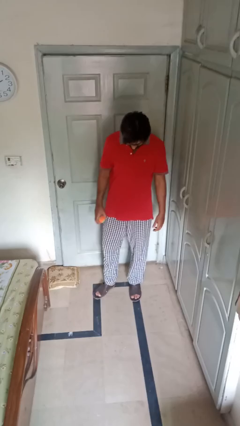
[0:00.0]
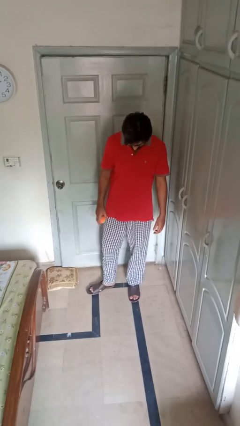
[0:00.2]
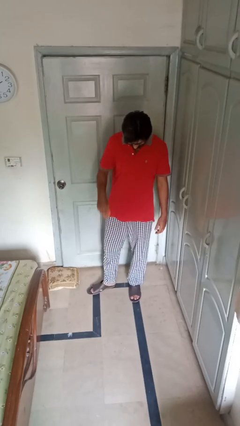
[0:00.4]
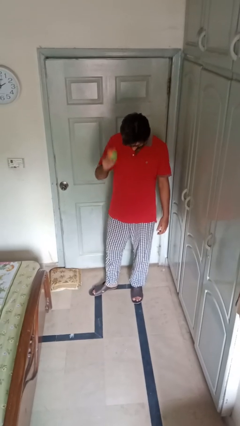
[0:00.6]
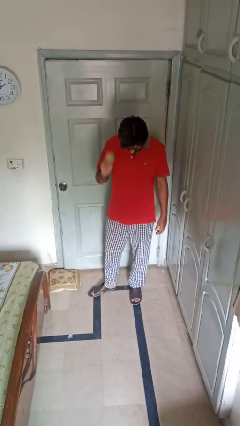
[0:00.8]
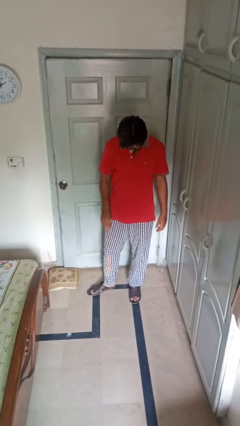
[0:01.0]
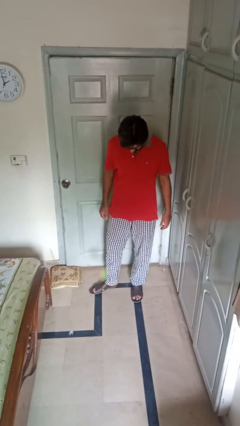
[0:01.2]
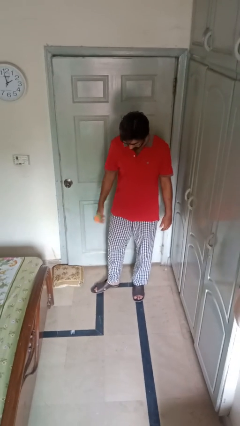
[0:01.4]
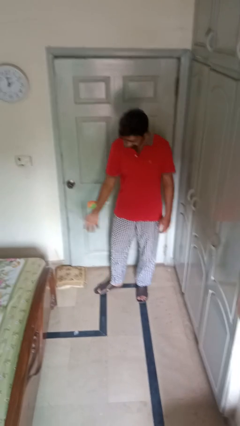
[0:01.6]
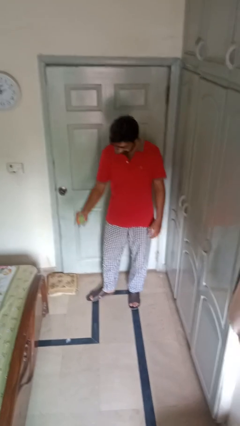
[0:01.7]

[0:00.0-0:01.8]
person bounces ball on floor

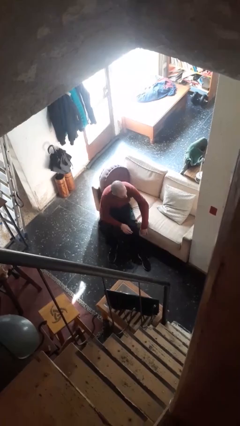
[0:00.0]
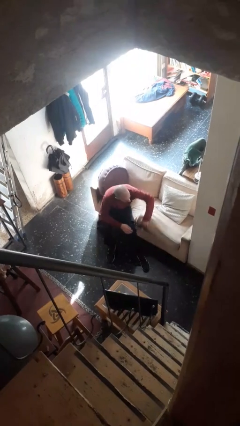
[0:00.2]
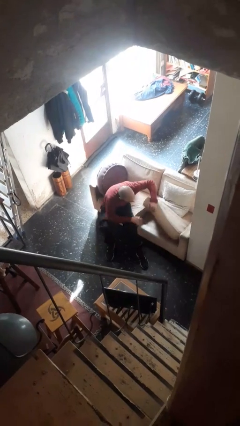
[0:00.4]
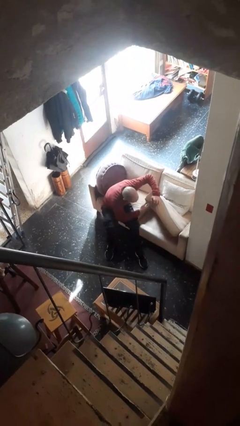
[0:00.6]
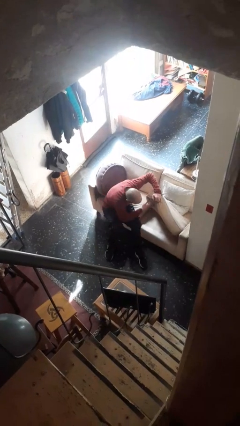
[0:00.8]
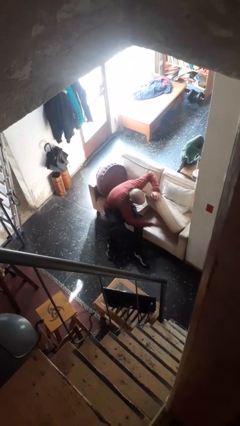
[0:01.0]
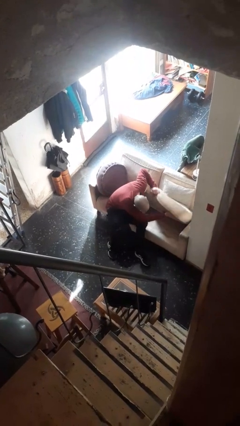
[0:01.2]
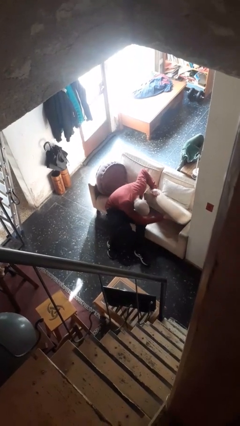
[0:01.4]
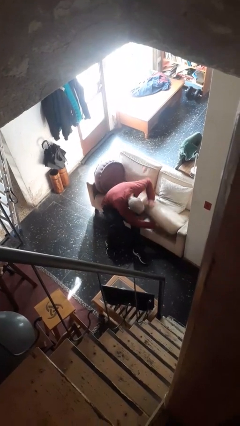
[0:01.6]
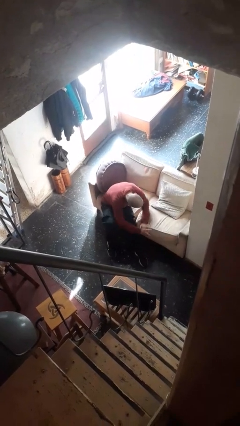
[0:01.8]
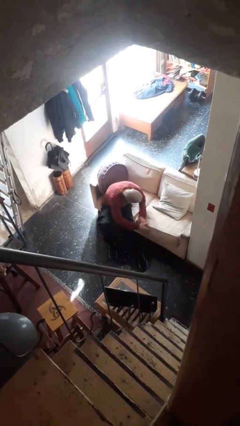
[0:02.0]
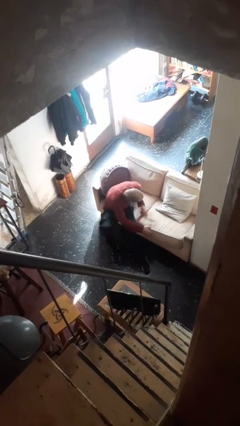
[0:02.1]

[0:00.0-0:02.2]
person searches in couch

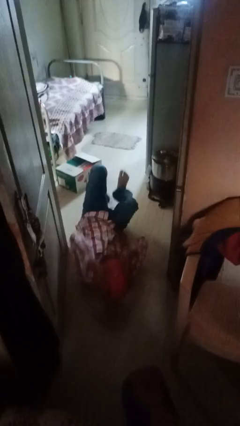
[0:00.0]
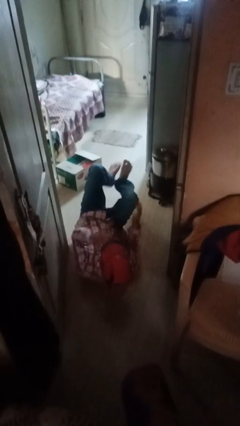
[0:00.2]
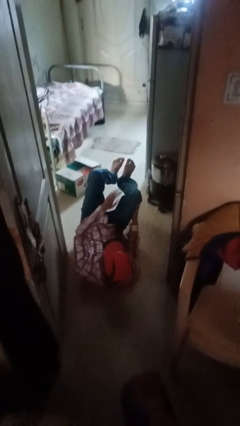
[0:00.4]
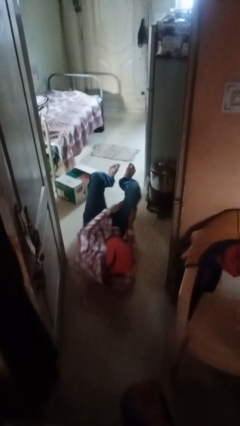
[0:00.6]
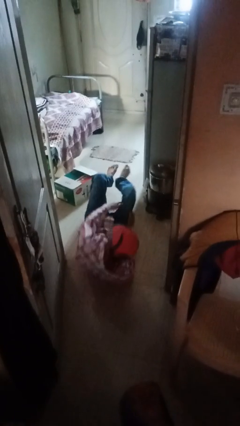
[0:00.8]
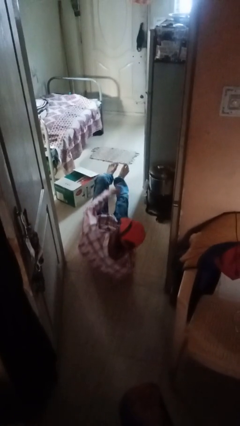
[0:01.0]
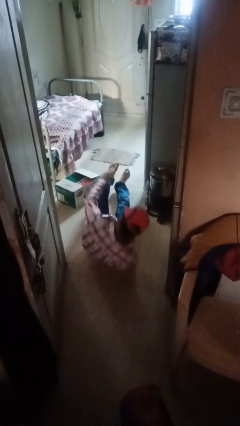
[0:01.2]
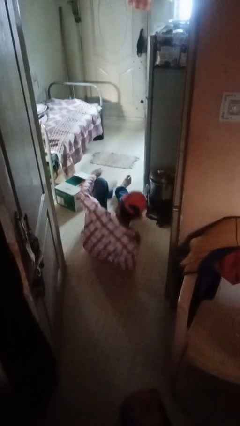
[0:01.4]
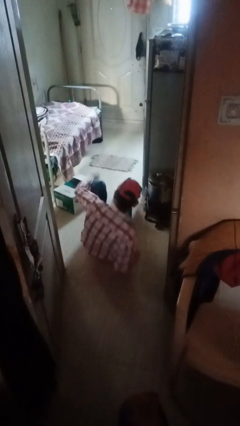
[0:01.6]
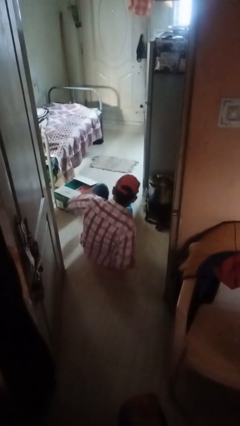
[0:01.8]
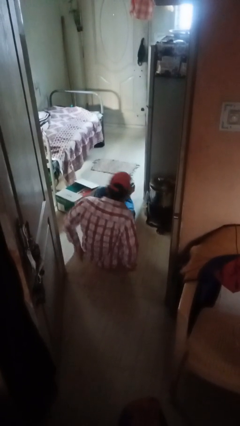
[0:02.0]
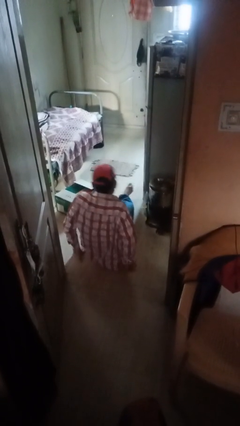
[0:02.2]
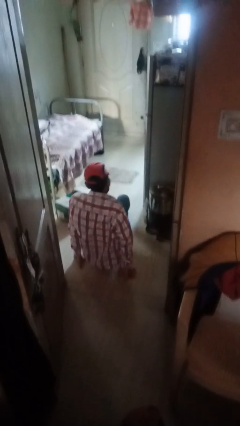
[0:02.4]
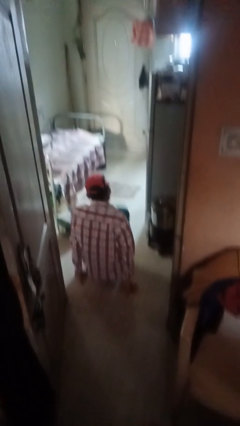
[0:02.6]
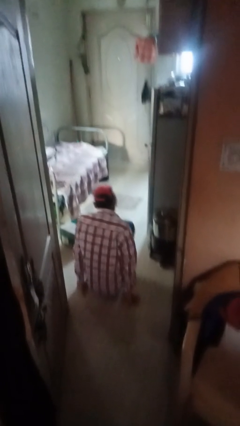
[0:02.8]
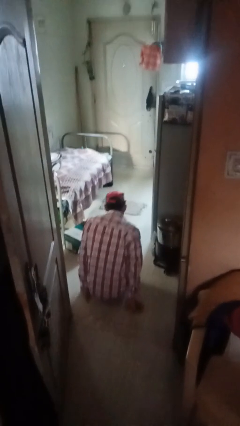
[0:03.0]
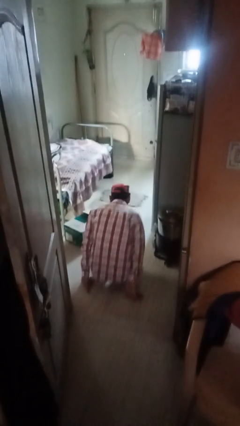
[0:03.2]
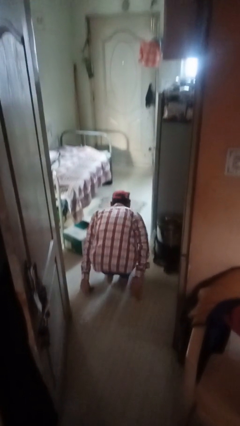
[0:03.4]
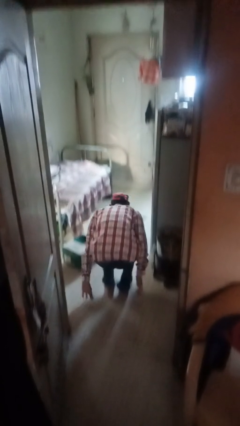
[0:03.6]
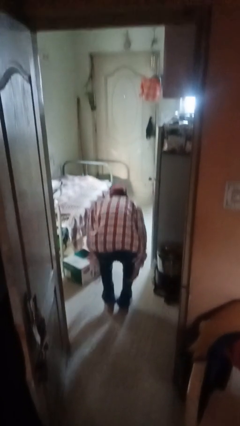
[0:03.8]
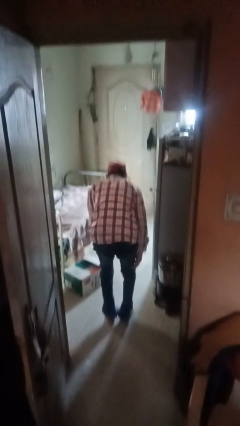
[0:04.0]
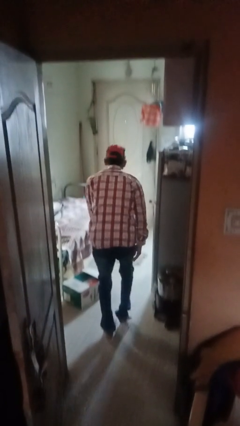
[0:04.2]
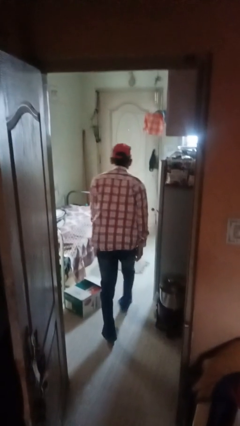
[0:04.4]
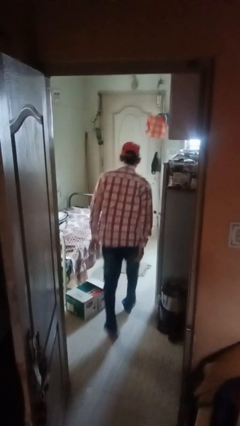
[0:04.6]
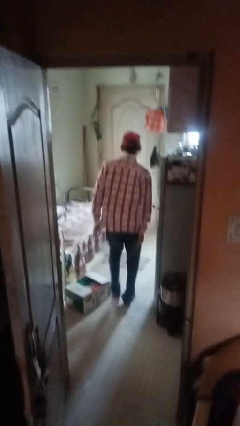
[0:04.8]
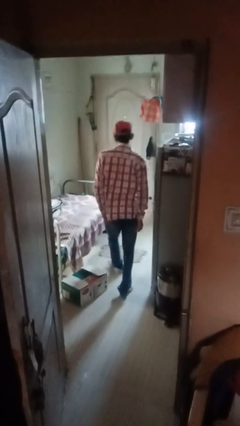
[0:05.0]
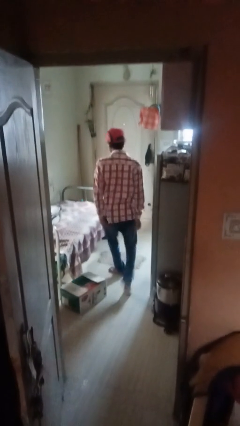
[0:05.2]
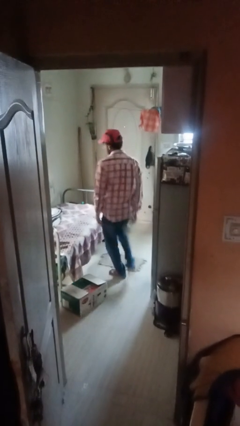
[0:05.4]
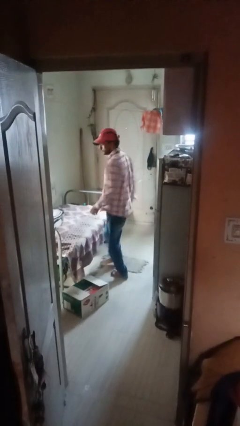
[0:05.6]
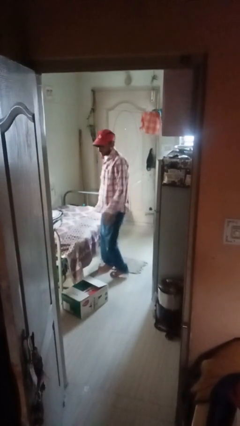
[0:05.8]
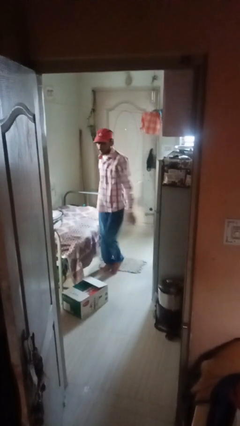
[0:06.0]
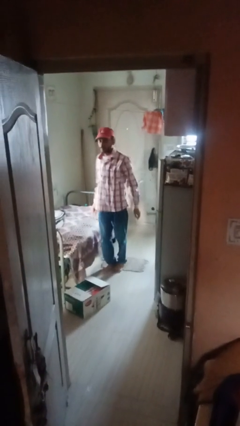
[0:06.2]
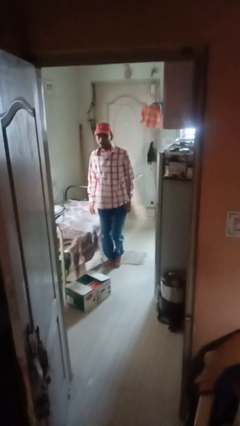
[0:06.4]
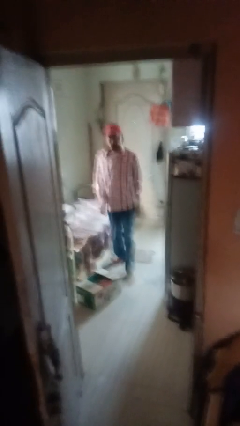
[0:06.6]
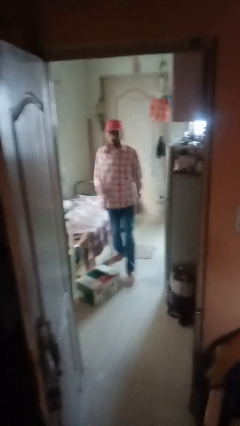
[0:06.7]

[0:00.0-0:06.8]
person stands up from floor

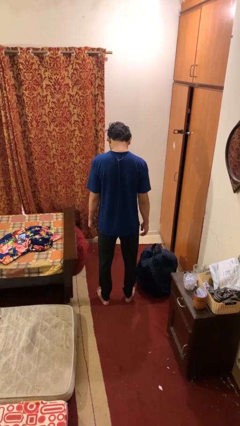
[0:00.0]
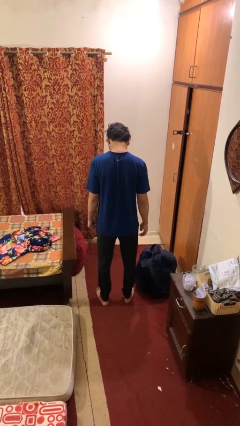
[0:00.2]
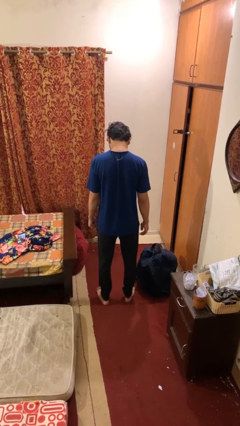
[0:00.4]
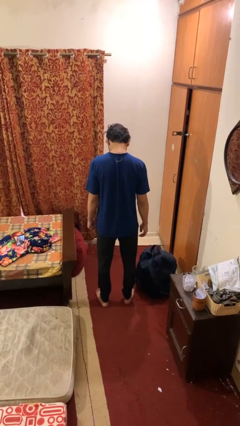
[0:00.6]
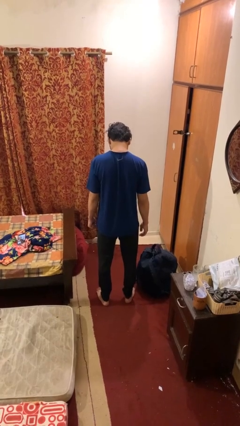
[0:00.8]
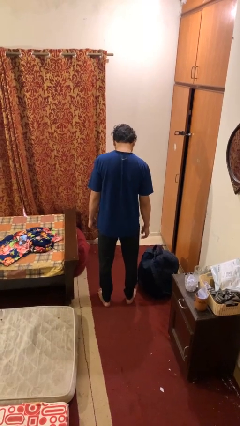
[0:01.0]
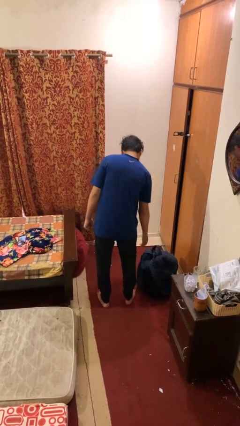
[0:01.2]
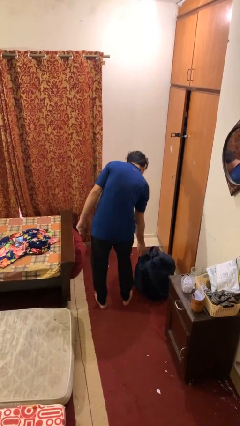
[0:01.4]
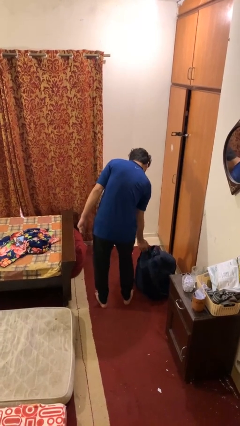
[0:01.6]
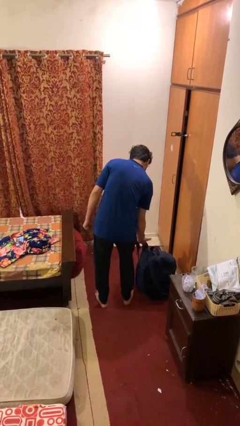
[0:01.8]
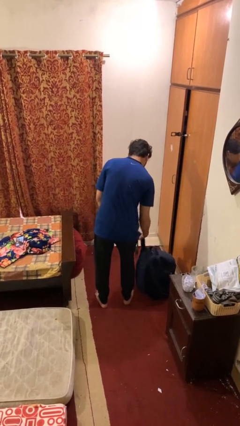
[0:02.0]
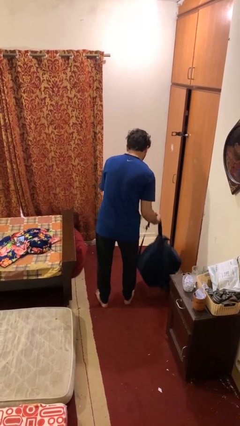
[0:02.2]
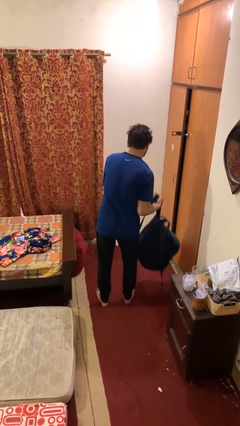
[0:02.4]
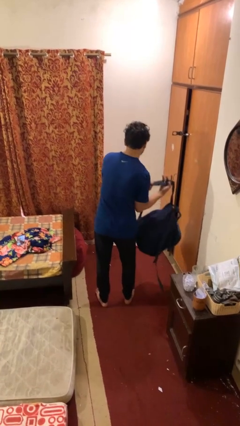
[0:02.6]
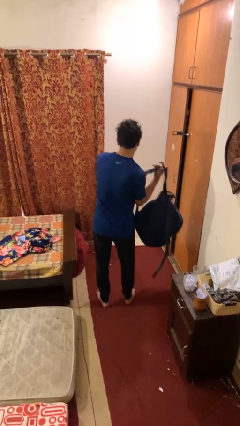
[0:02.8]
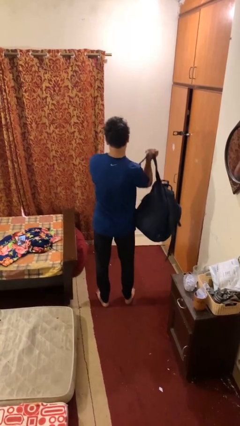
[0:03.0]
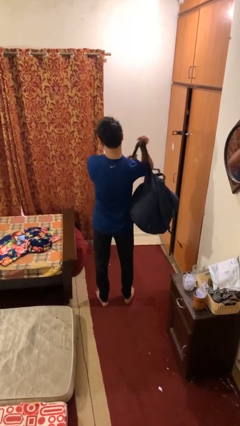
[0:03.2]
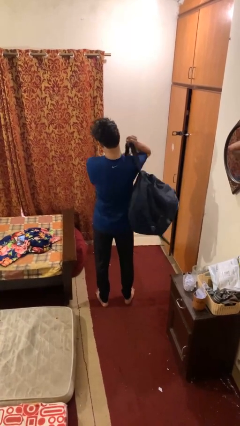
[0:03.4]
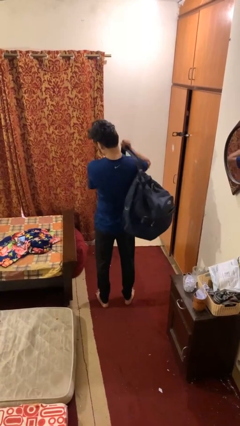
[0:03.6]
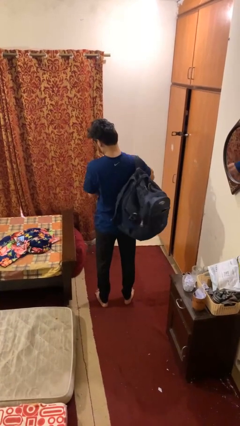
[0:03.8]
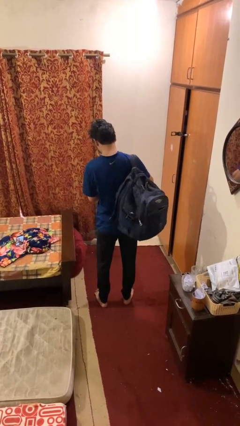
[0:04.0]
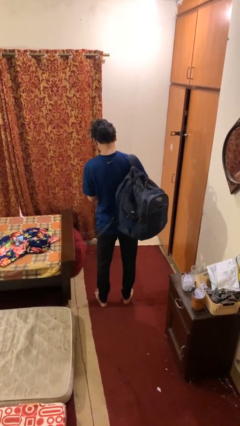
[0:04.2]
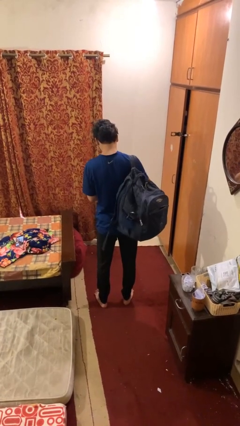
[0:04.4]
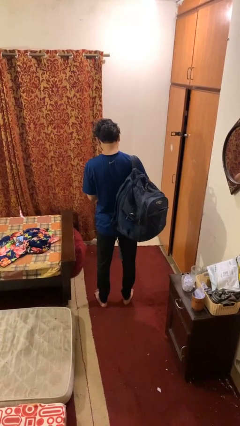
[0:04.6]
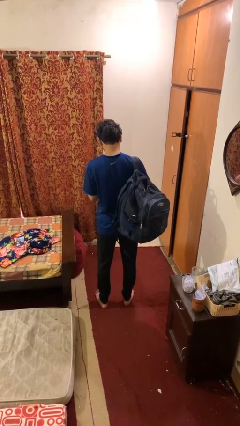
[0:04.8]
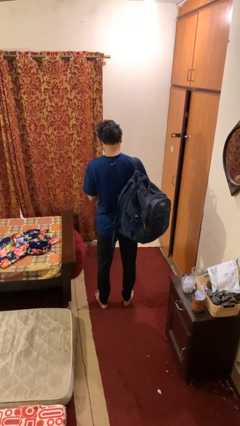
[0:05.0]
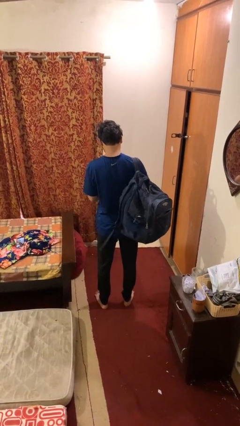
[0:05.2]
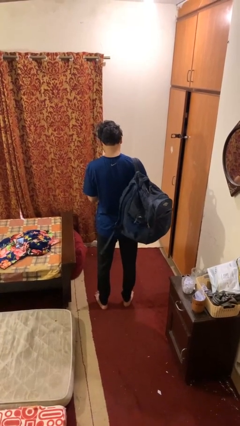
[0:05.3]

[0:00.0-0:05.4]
person puts on backpack

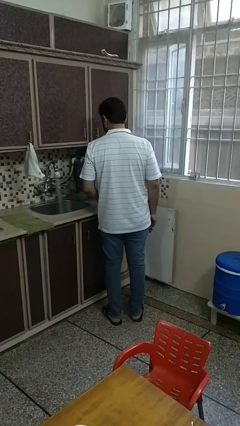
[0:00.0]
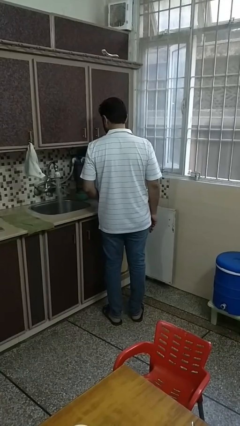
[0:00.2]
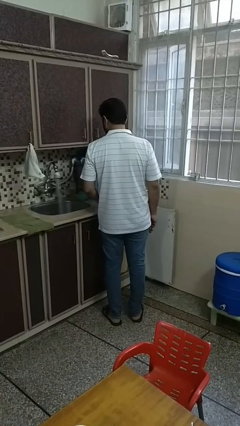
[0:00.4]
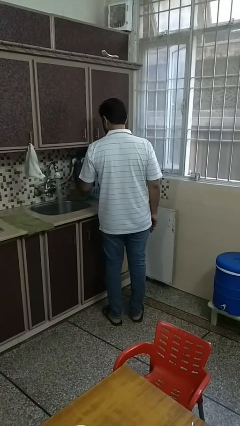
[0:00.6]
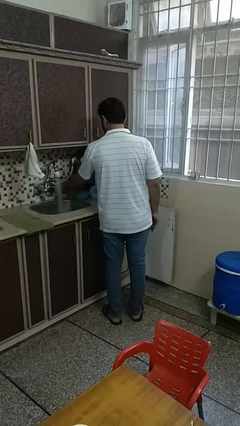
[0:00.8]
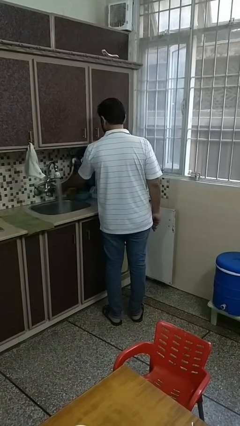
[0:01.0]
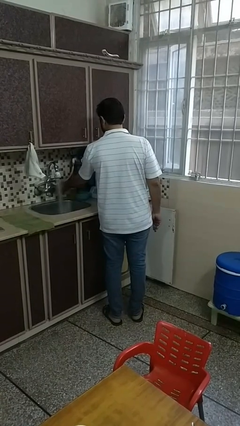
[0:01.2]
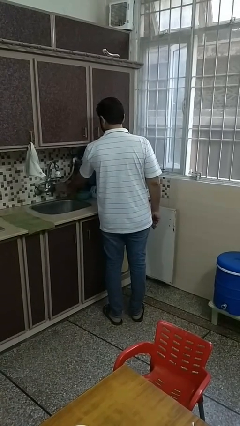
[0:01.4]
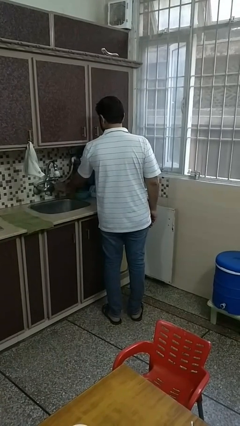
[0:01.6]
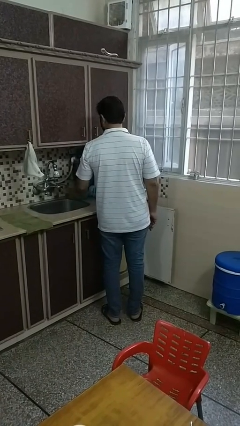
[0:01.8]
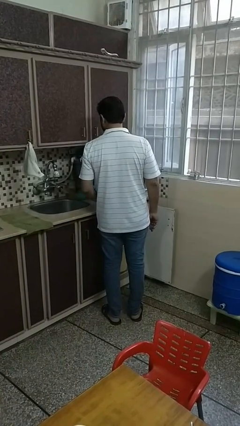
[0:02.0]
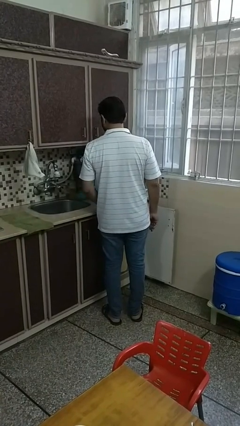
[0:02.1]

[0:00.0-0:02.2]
person turns off faucet
